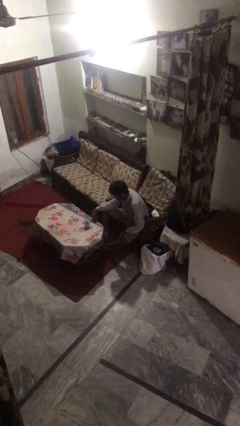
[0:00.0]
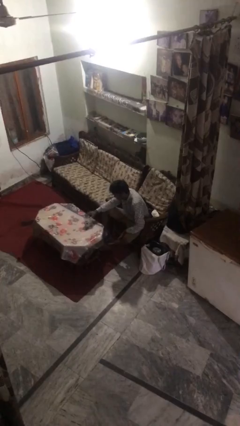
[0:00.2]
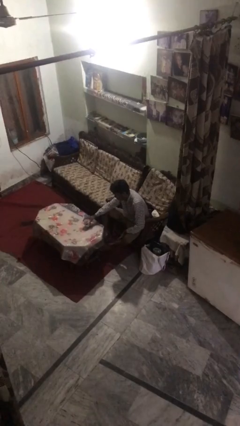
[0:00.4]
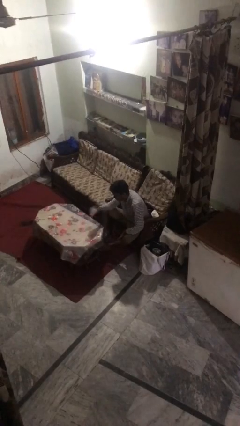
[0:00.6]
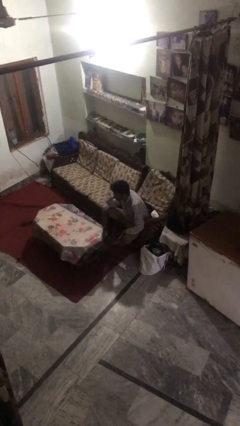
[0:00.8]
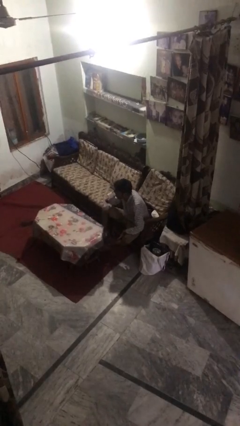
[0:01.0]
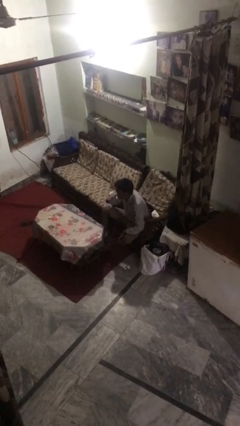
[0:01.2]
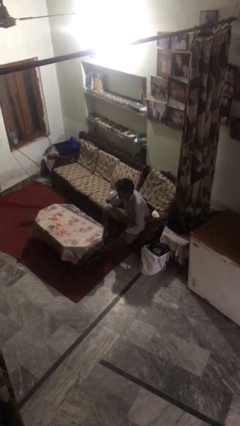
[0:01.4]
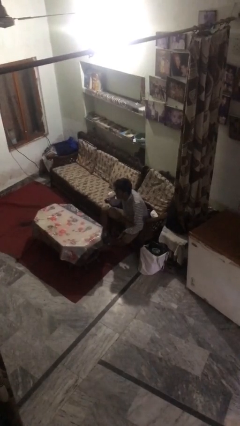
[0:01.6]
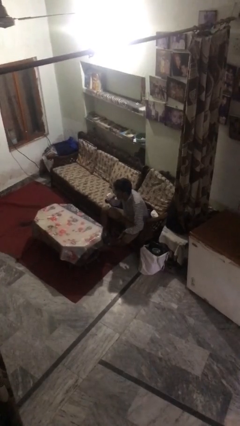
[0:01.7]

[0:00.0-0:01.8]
person drinks from mug

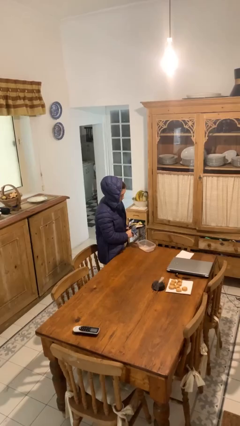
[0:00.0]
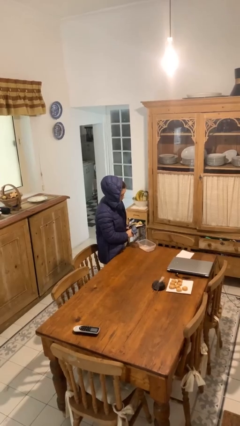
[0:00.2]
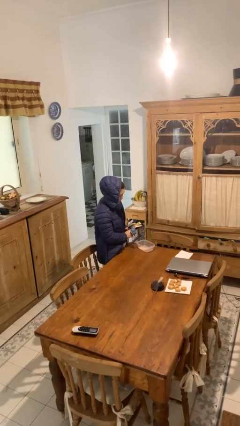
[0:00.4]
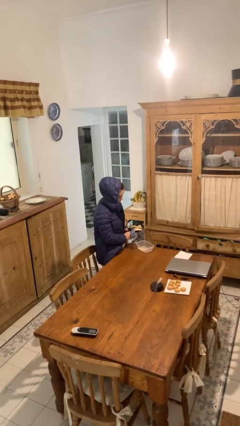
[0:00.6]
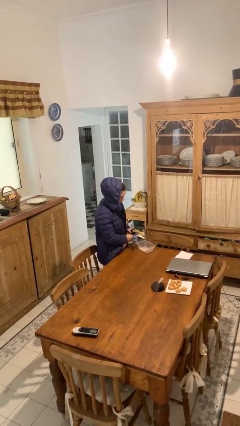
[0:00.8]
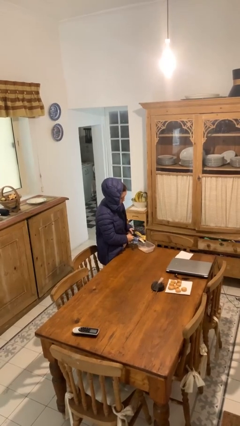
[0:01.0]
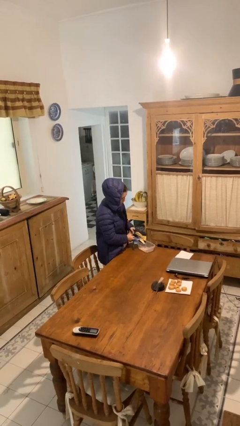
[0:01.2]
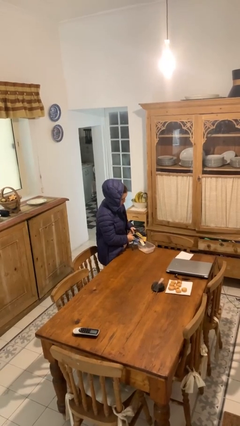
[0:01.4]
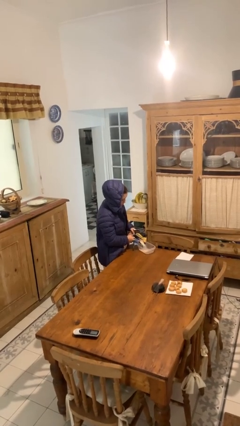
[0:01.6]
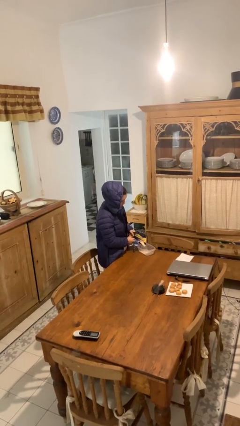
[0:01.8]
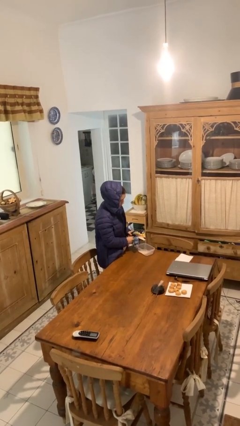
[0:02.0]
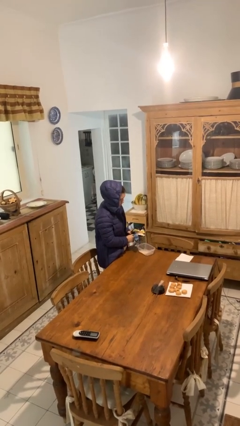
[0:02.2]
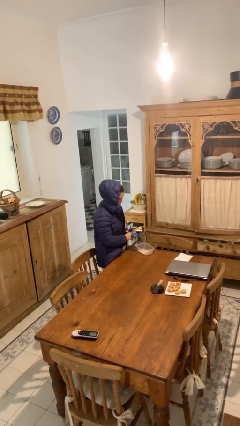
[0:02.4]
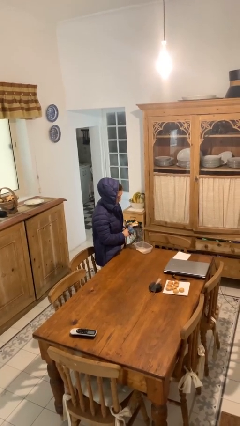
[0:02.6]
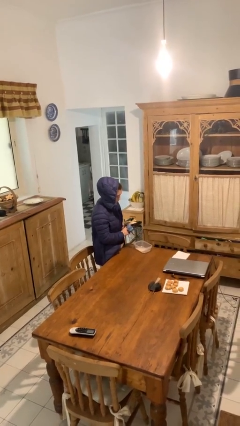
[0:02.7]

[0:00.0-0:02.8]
person pours into bowl

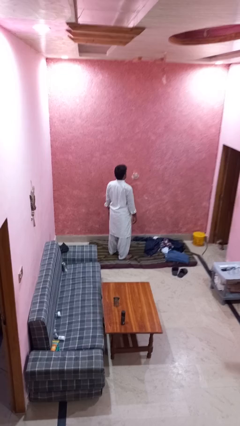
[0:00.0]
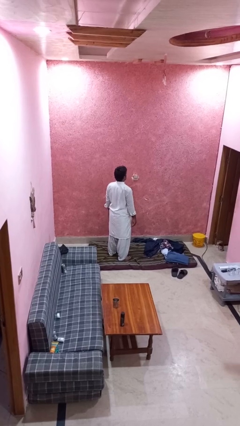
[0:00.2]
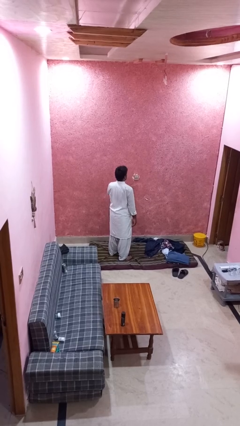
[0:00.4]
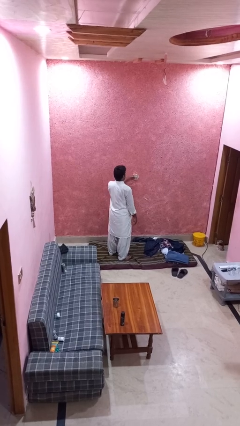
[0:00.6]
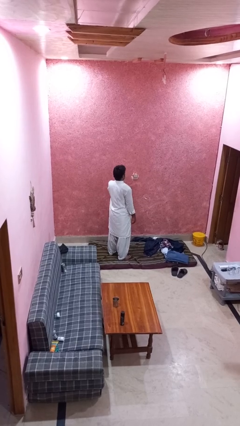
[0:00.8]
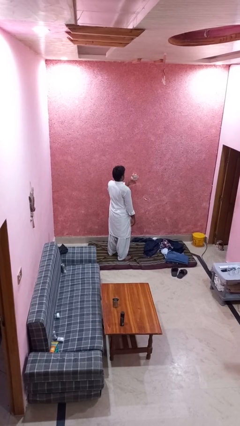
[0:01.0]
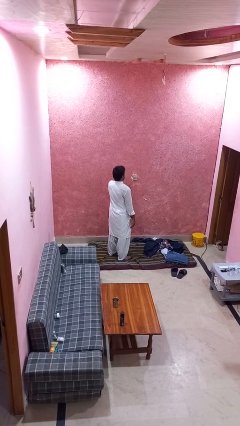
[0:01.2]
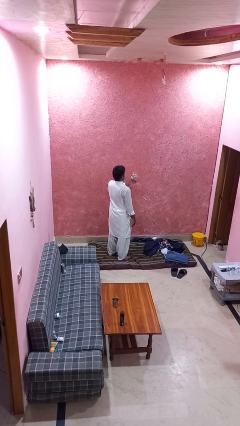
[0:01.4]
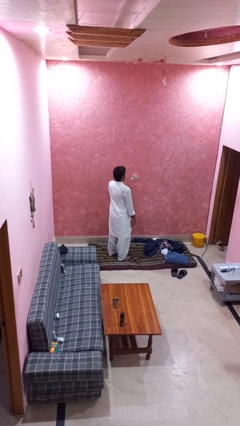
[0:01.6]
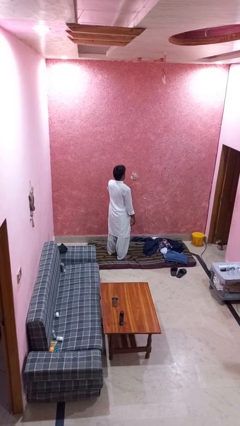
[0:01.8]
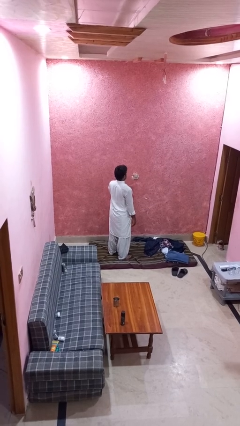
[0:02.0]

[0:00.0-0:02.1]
person drums on chest

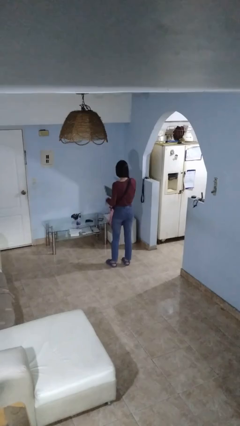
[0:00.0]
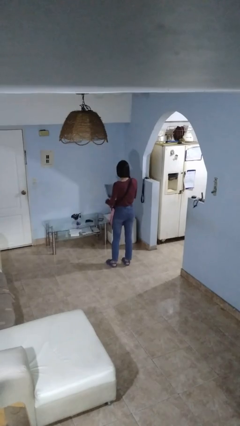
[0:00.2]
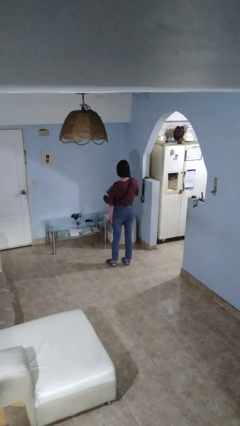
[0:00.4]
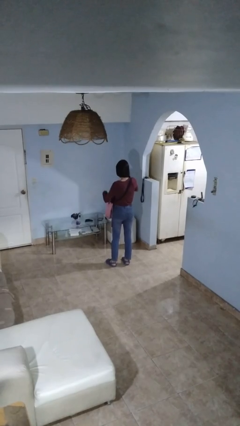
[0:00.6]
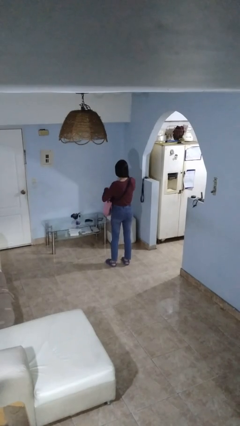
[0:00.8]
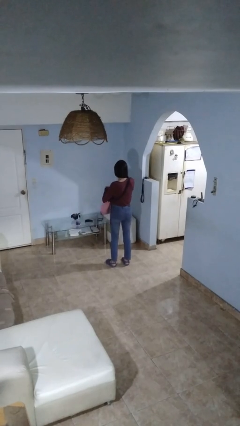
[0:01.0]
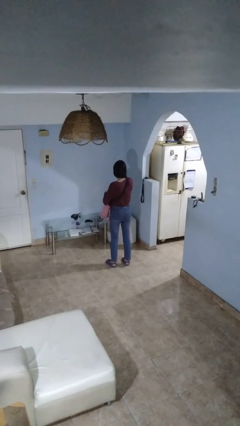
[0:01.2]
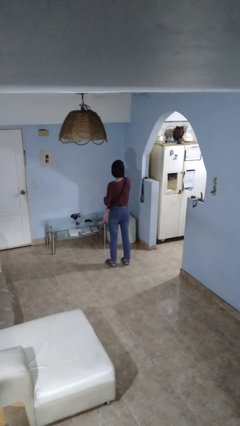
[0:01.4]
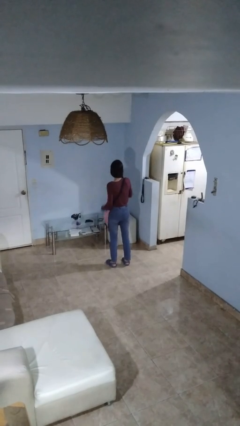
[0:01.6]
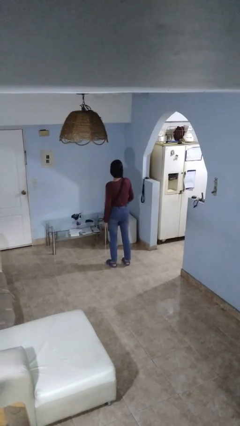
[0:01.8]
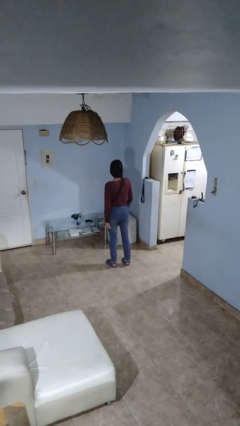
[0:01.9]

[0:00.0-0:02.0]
person puts object into backpack

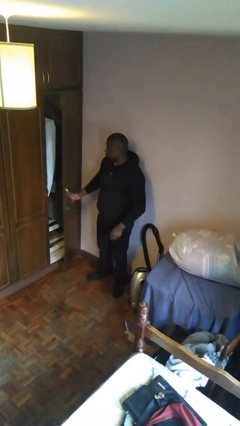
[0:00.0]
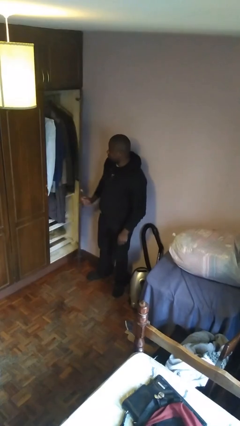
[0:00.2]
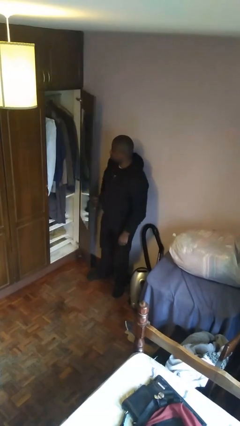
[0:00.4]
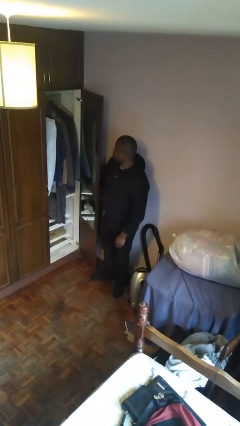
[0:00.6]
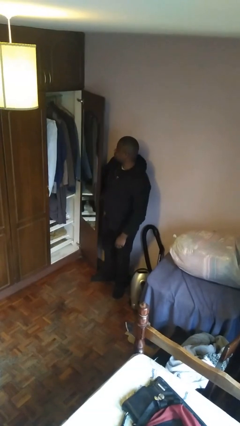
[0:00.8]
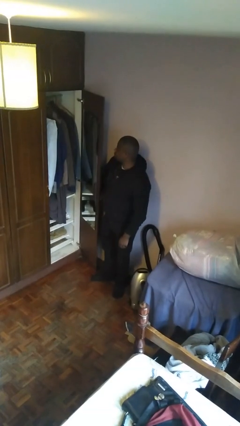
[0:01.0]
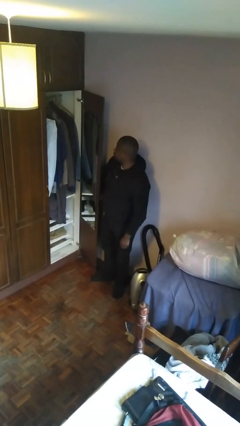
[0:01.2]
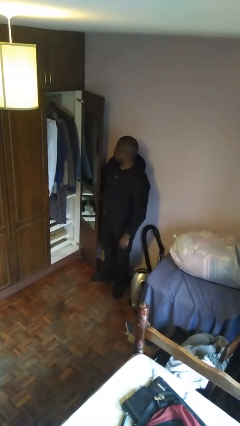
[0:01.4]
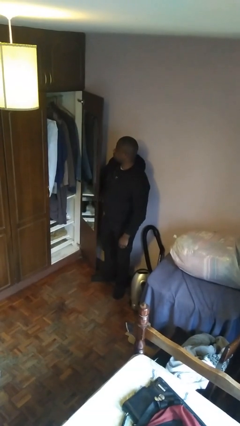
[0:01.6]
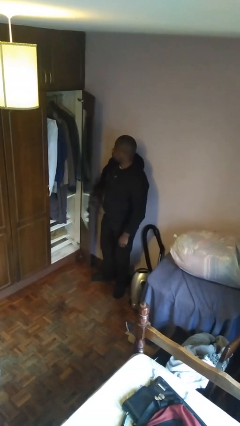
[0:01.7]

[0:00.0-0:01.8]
person opens closet door

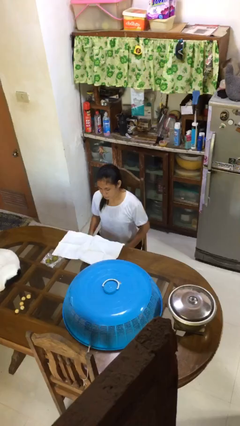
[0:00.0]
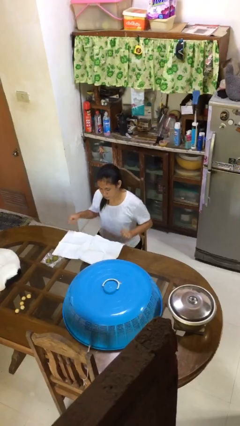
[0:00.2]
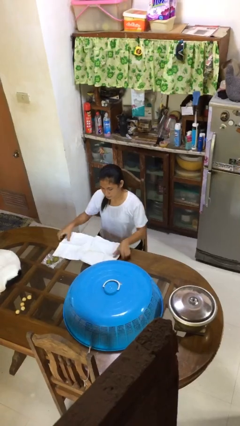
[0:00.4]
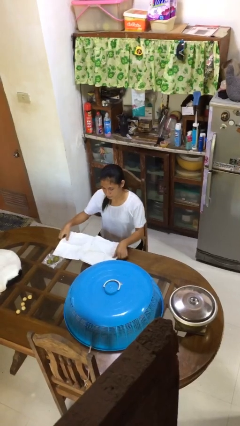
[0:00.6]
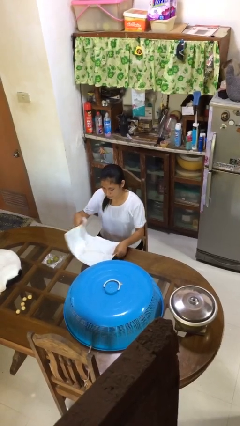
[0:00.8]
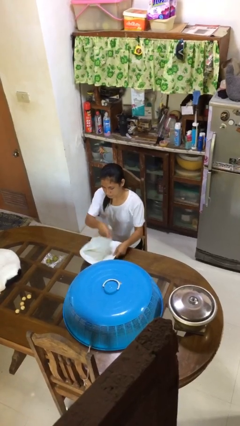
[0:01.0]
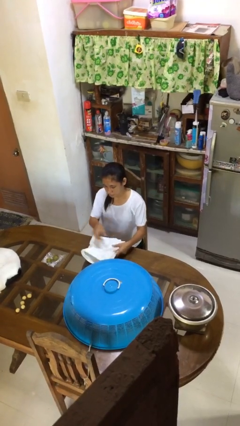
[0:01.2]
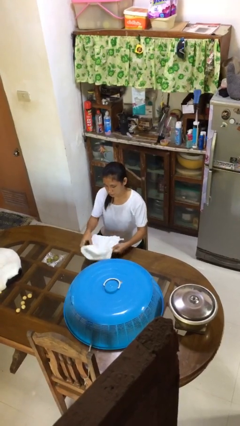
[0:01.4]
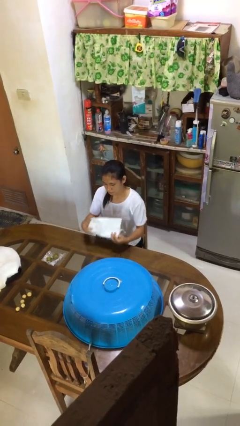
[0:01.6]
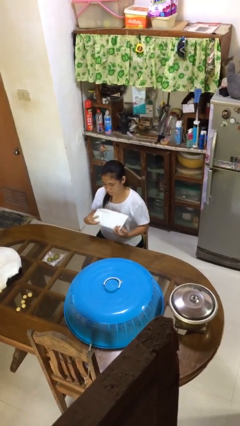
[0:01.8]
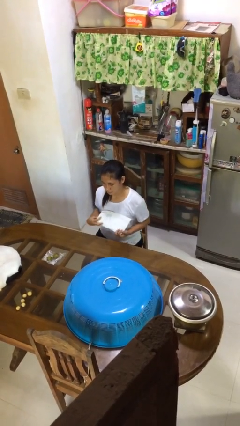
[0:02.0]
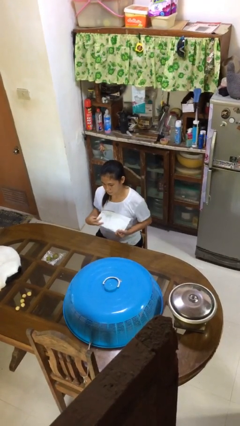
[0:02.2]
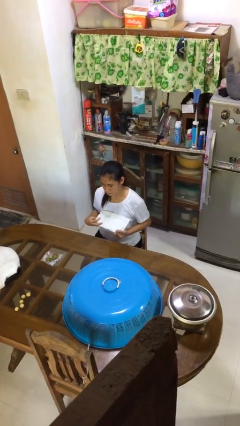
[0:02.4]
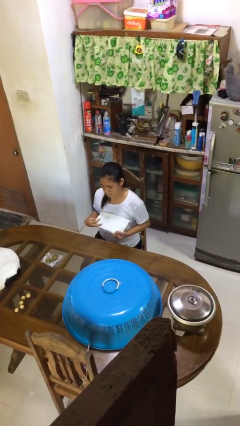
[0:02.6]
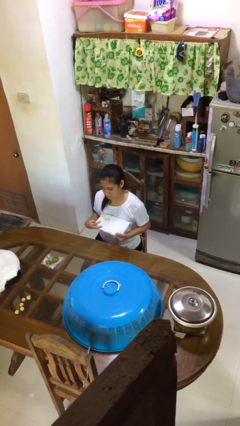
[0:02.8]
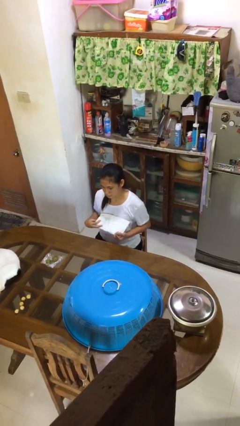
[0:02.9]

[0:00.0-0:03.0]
person folds tablecloth

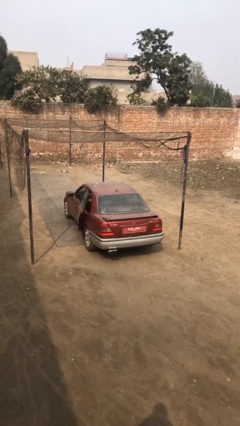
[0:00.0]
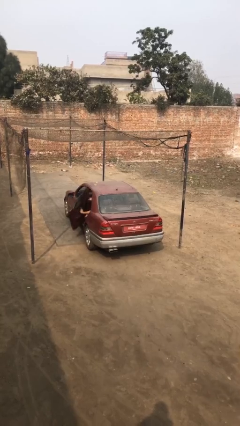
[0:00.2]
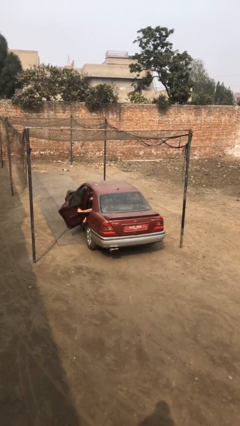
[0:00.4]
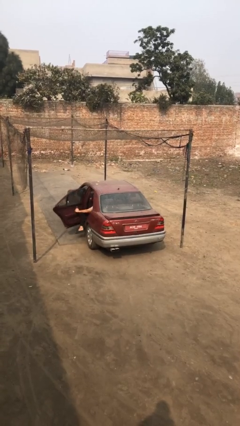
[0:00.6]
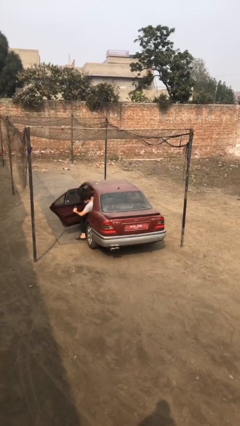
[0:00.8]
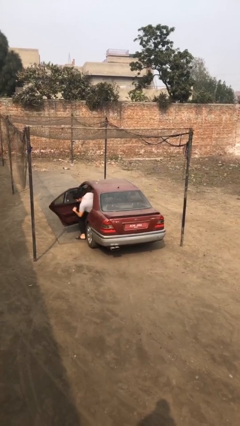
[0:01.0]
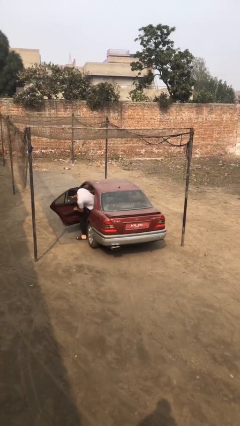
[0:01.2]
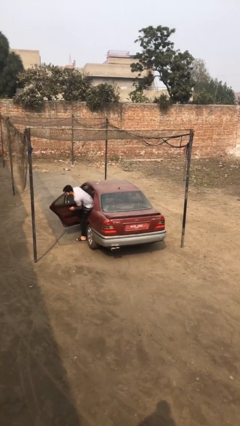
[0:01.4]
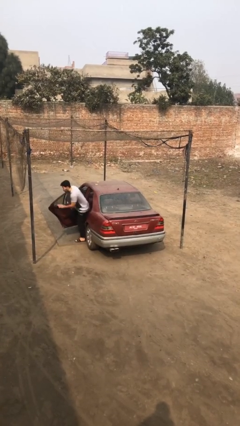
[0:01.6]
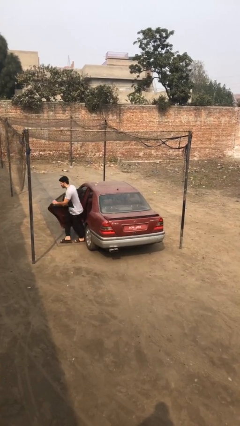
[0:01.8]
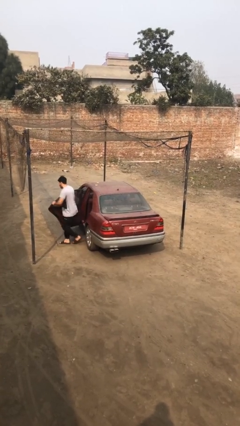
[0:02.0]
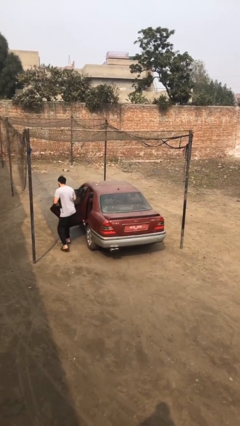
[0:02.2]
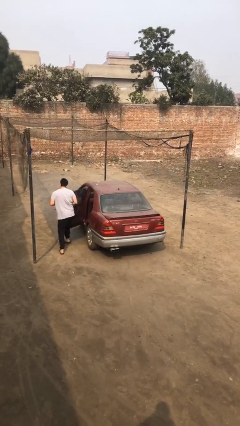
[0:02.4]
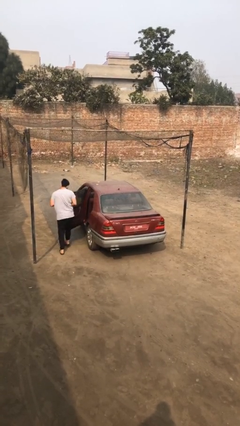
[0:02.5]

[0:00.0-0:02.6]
car drops off person

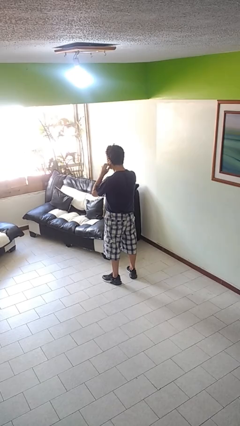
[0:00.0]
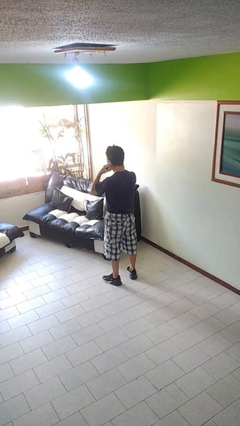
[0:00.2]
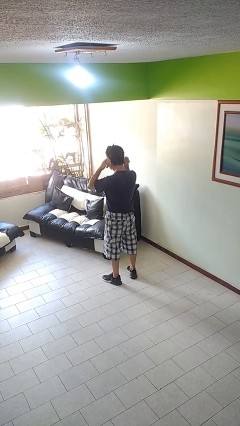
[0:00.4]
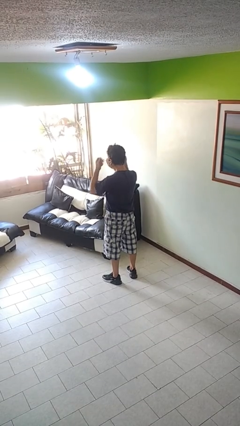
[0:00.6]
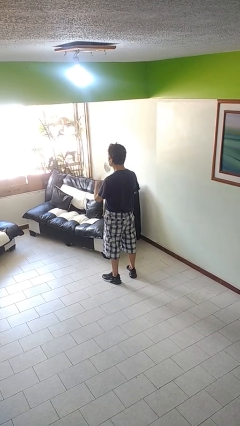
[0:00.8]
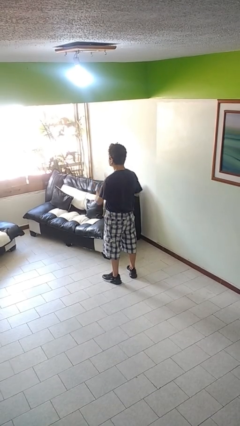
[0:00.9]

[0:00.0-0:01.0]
person takes off facemask
